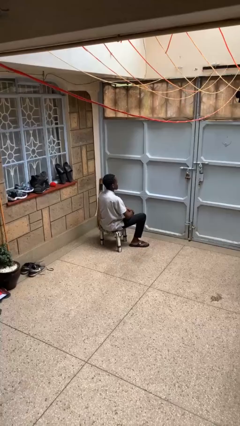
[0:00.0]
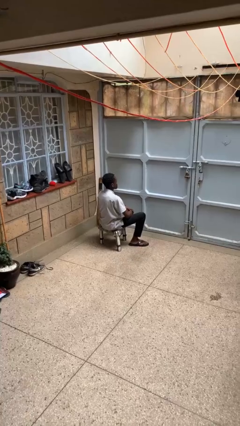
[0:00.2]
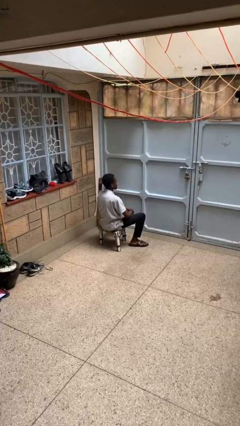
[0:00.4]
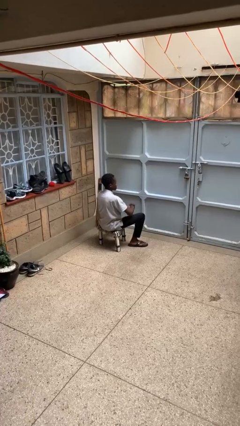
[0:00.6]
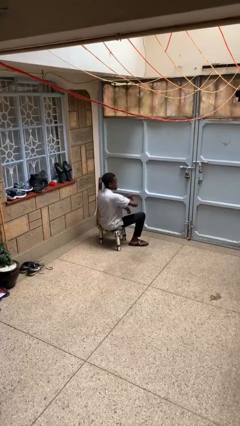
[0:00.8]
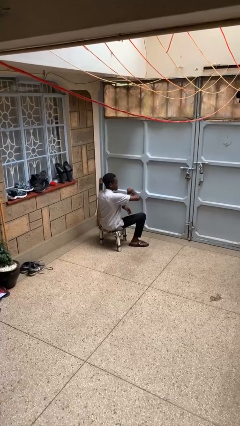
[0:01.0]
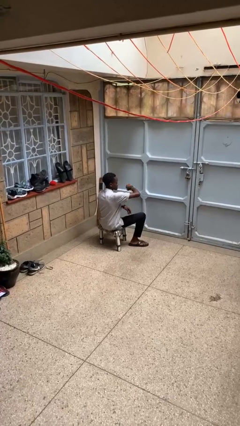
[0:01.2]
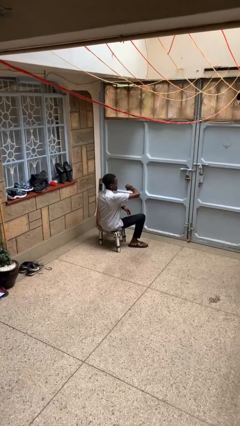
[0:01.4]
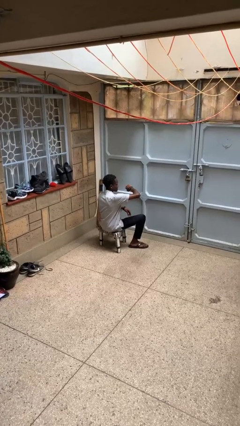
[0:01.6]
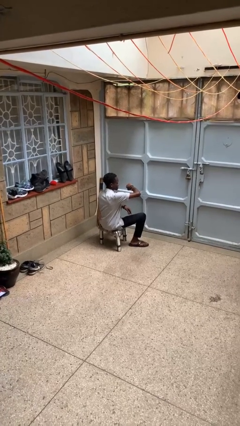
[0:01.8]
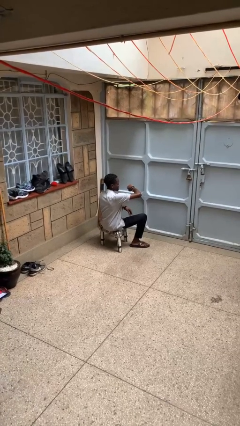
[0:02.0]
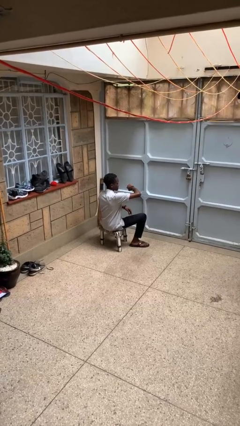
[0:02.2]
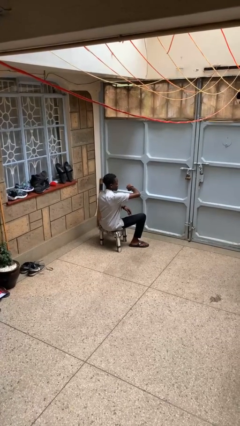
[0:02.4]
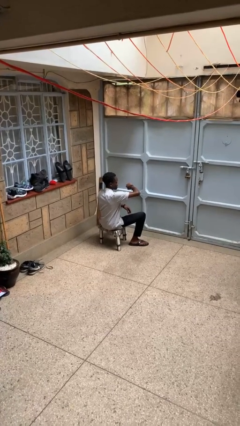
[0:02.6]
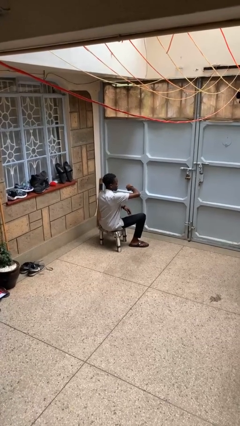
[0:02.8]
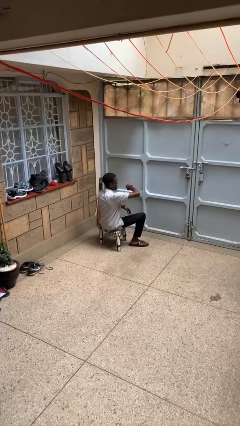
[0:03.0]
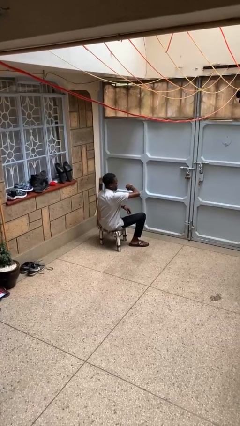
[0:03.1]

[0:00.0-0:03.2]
person looks at wristwatch

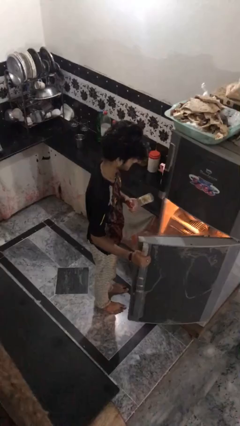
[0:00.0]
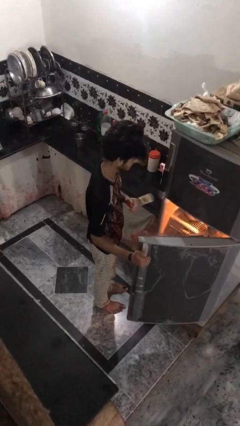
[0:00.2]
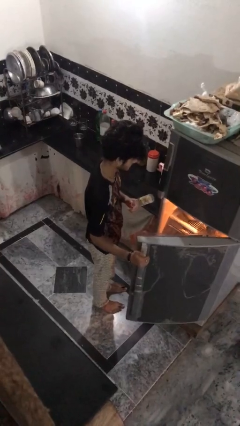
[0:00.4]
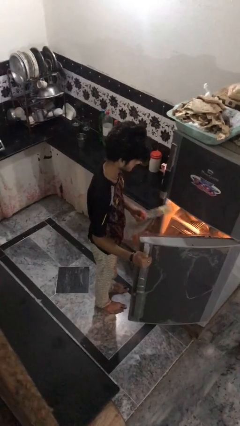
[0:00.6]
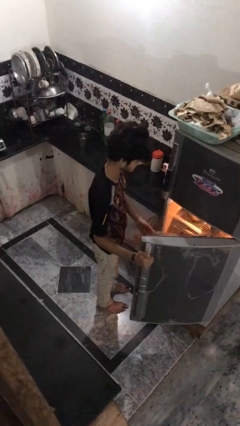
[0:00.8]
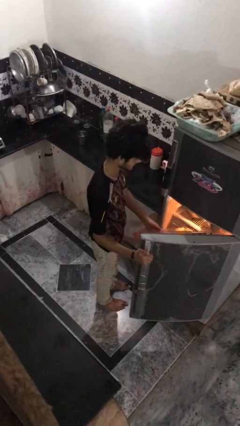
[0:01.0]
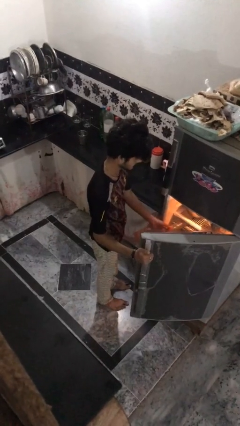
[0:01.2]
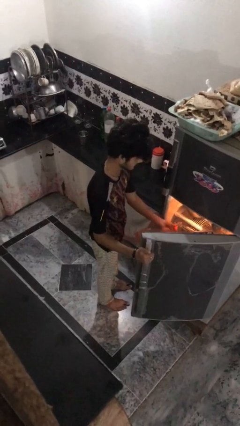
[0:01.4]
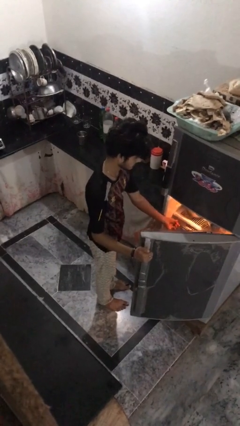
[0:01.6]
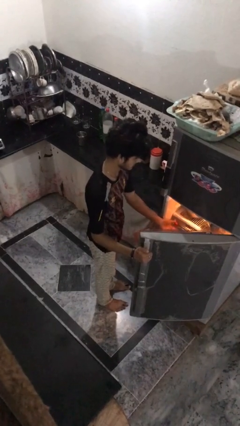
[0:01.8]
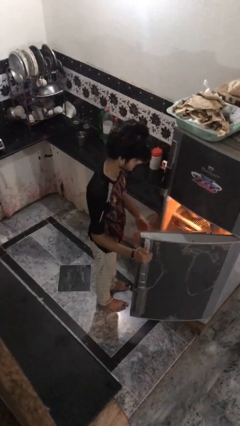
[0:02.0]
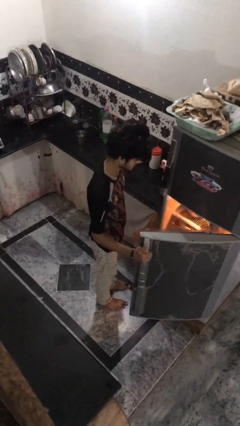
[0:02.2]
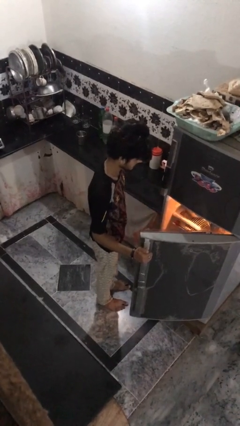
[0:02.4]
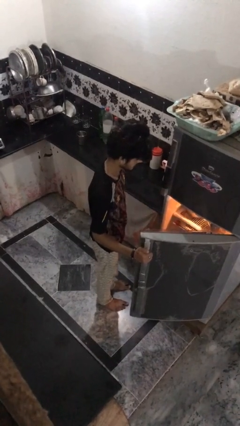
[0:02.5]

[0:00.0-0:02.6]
person puts object into refrigerator

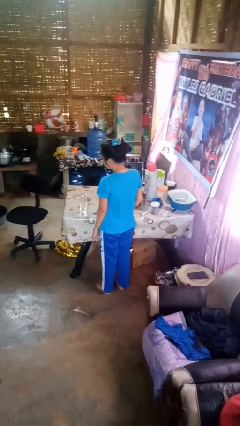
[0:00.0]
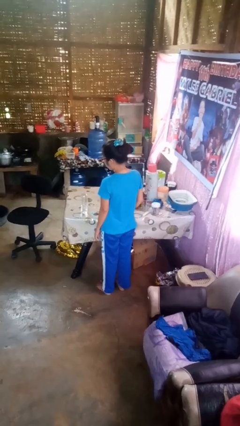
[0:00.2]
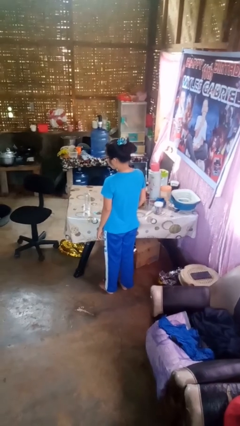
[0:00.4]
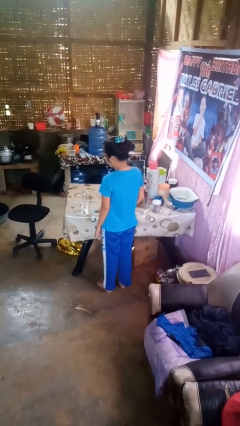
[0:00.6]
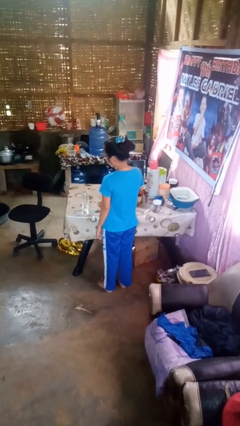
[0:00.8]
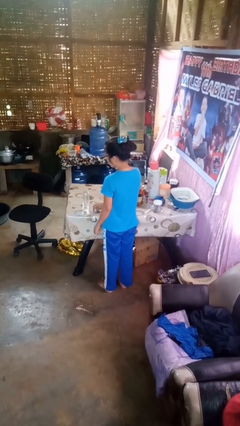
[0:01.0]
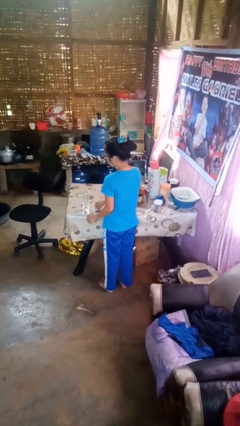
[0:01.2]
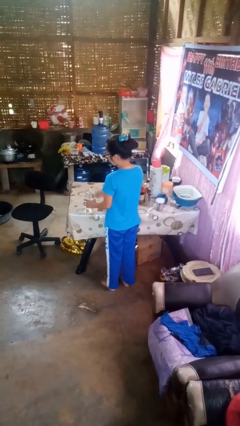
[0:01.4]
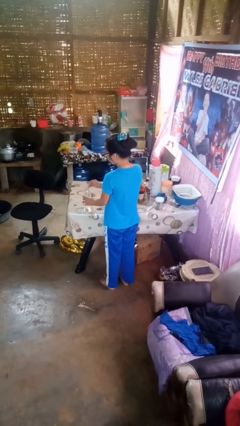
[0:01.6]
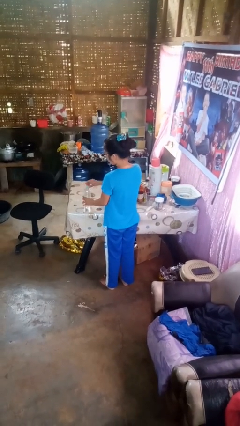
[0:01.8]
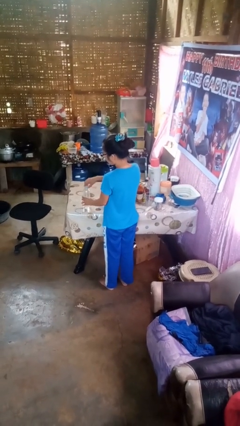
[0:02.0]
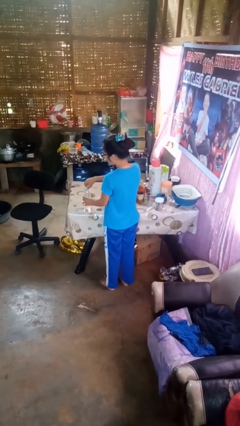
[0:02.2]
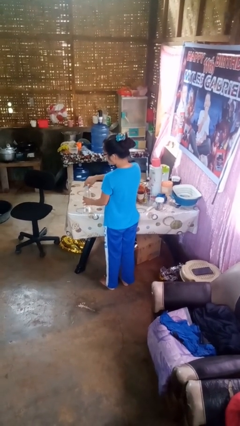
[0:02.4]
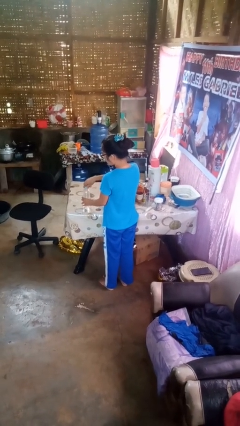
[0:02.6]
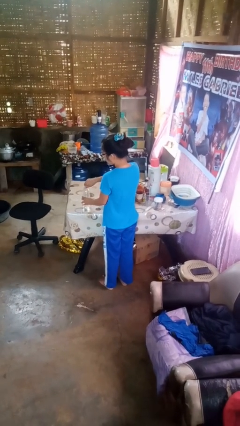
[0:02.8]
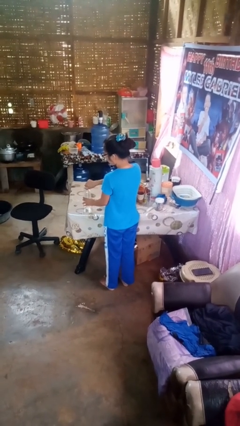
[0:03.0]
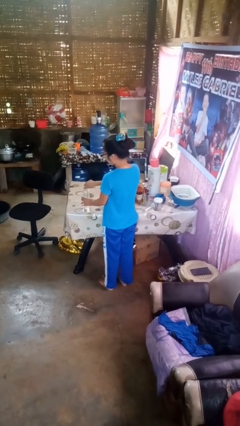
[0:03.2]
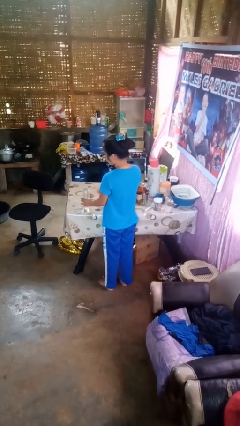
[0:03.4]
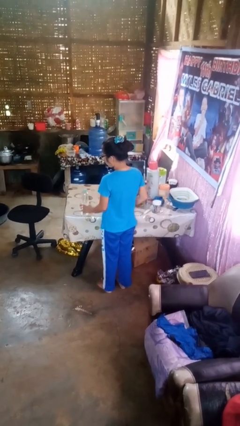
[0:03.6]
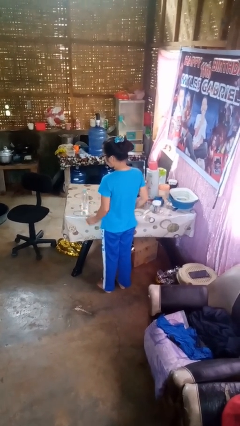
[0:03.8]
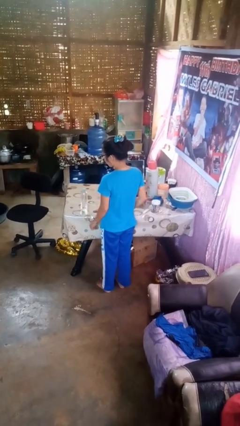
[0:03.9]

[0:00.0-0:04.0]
person screws lid to bottle

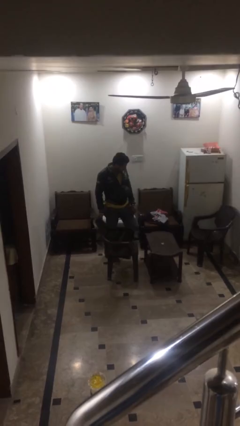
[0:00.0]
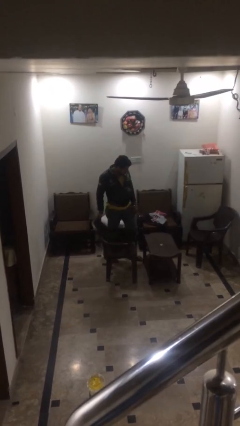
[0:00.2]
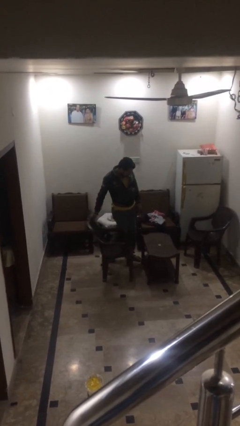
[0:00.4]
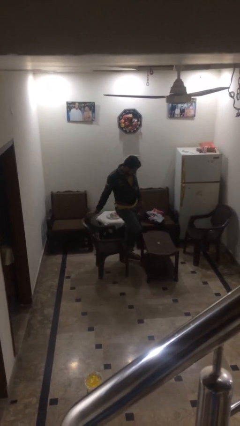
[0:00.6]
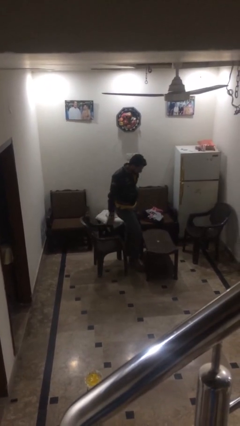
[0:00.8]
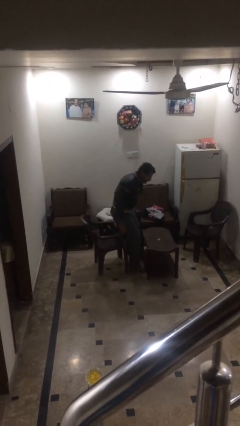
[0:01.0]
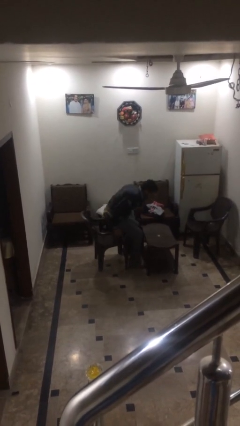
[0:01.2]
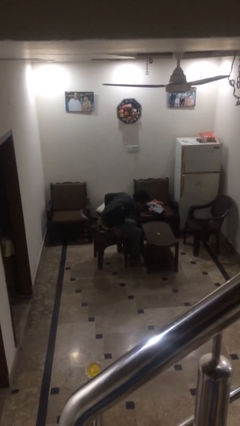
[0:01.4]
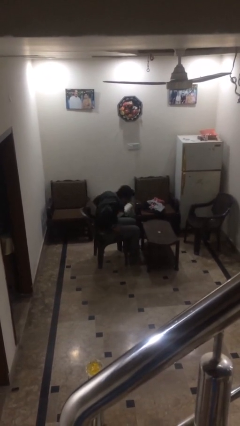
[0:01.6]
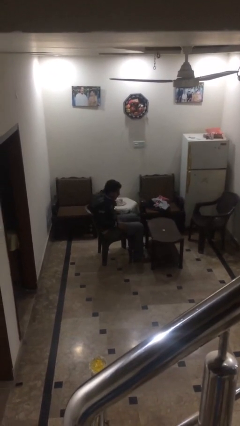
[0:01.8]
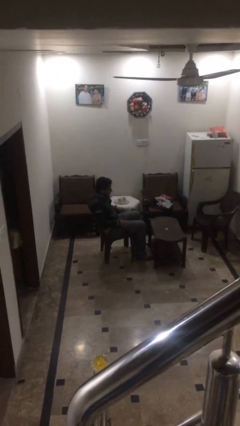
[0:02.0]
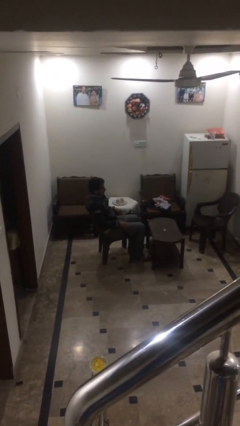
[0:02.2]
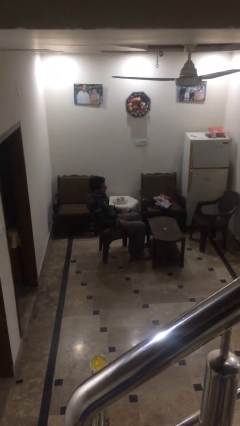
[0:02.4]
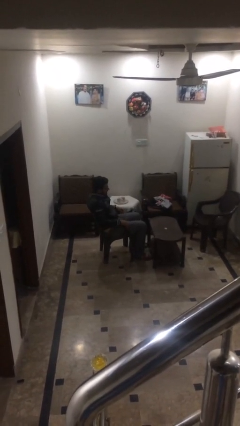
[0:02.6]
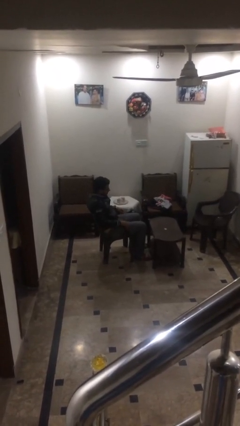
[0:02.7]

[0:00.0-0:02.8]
person sits down

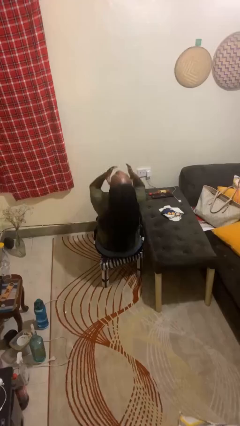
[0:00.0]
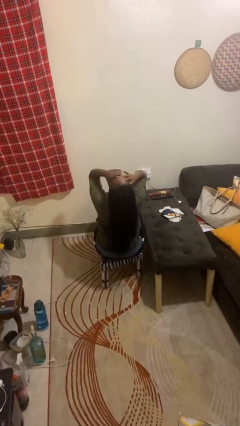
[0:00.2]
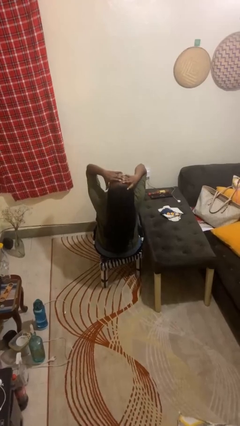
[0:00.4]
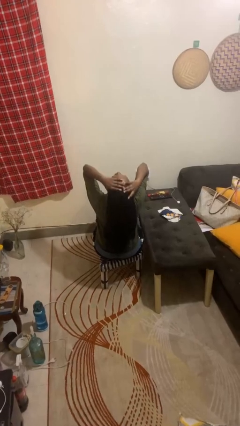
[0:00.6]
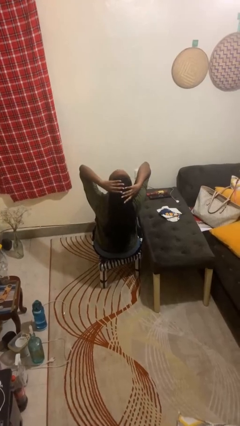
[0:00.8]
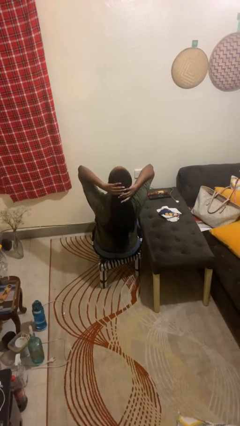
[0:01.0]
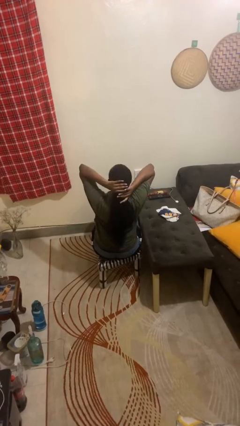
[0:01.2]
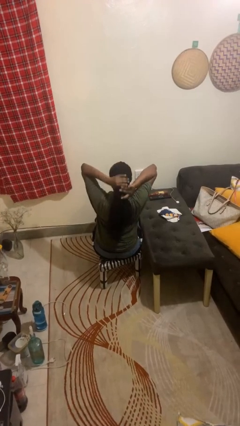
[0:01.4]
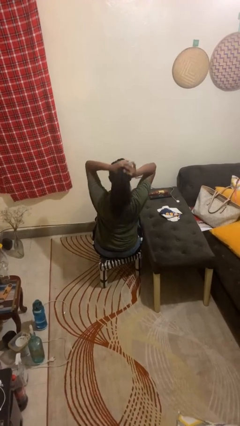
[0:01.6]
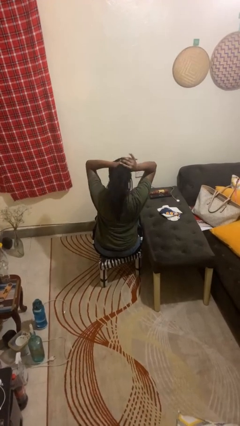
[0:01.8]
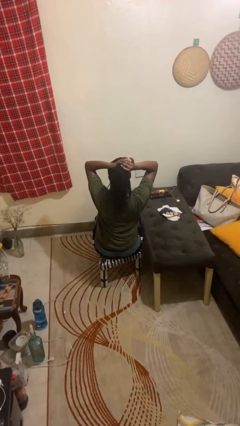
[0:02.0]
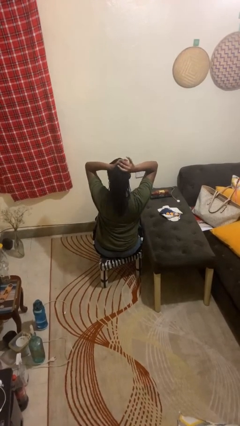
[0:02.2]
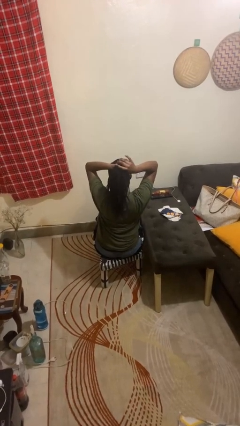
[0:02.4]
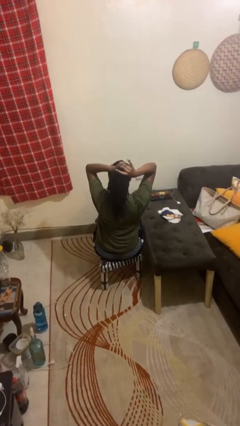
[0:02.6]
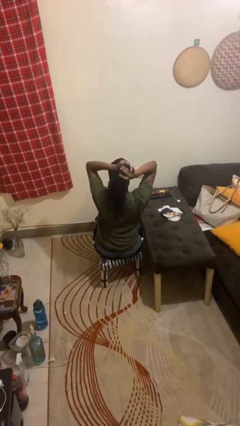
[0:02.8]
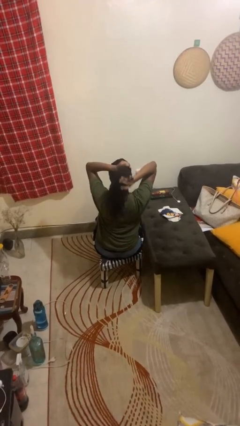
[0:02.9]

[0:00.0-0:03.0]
person puts hair in ponytail

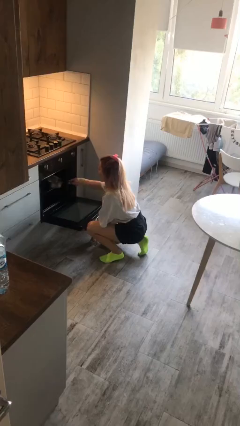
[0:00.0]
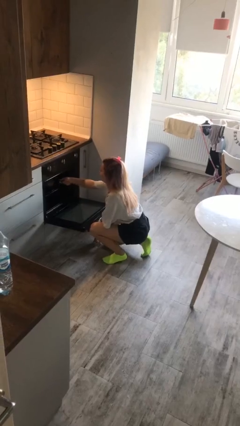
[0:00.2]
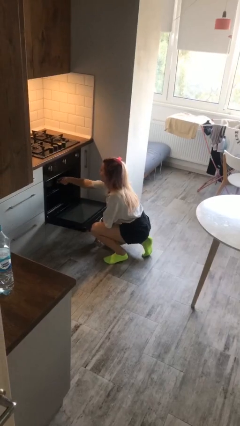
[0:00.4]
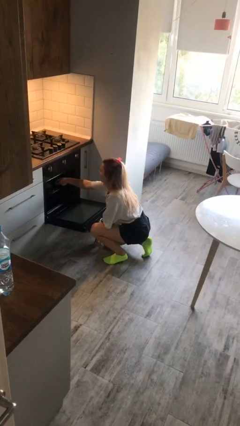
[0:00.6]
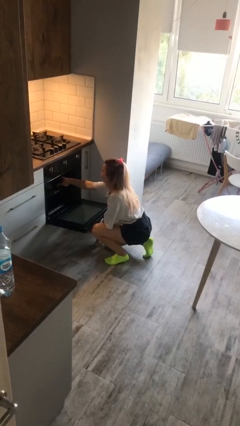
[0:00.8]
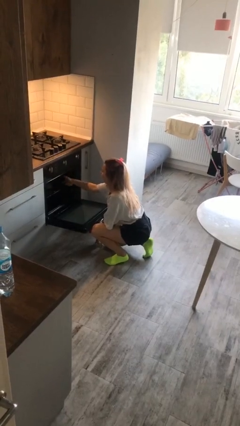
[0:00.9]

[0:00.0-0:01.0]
person puts object into oven

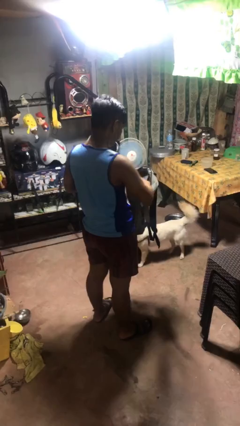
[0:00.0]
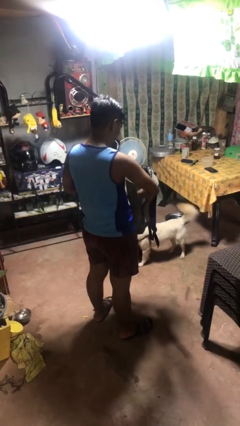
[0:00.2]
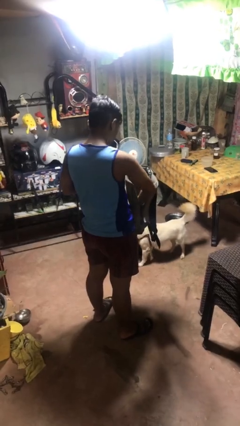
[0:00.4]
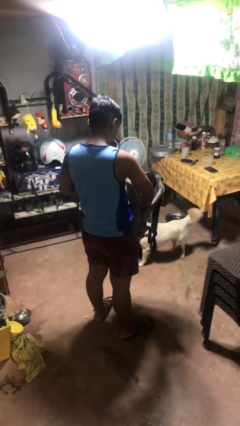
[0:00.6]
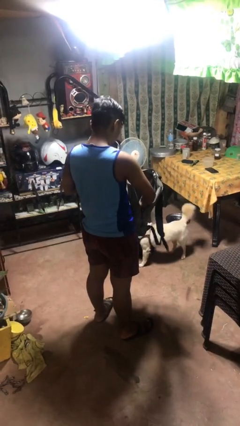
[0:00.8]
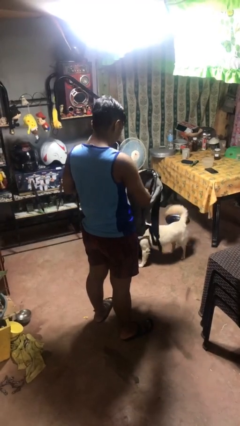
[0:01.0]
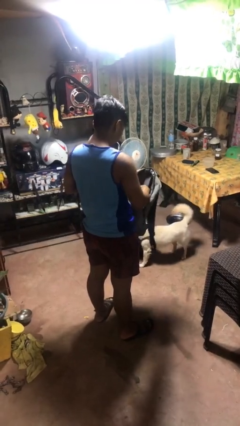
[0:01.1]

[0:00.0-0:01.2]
person puts object into bag
